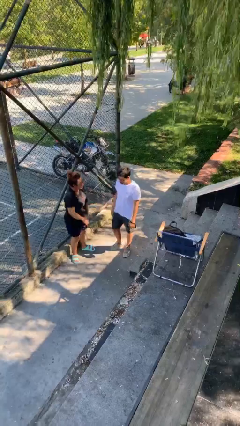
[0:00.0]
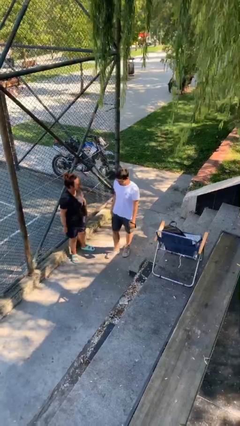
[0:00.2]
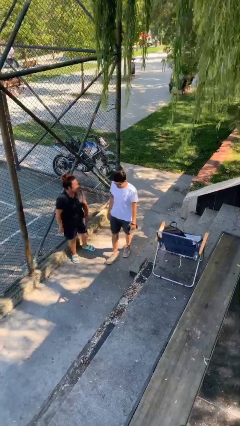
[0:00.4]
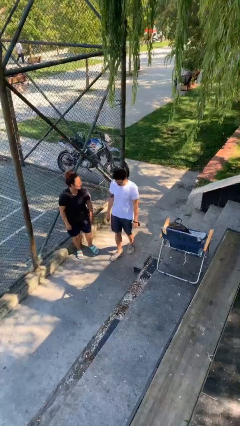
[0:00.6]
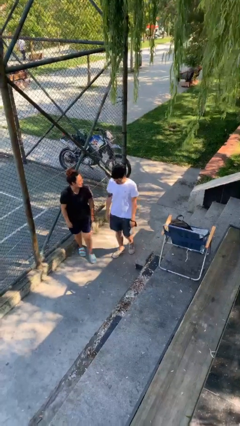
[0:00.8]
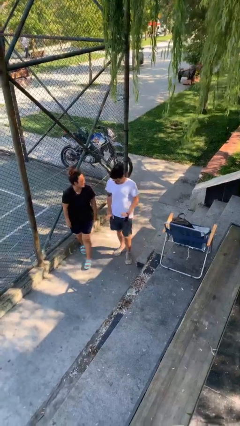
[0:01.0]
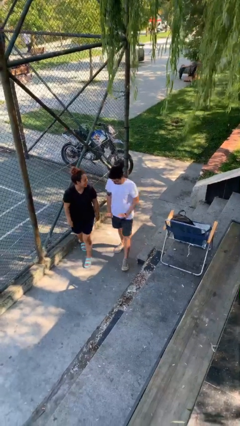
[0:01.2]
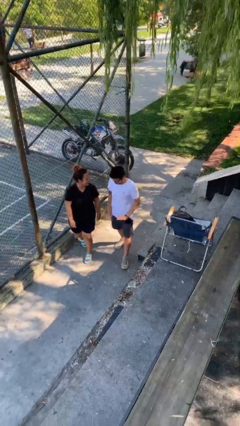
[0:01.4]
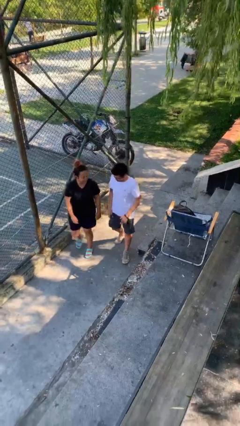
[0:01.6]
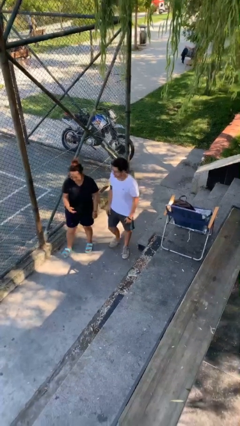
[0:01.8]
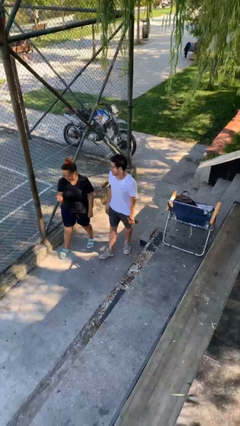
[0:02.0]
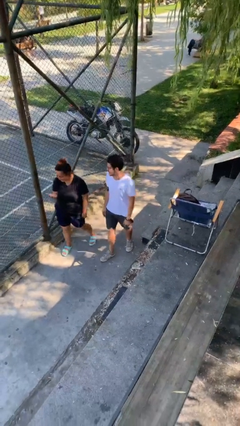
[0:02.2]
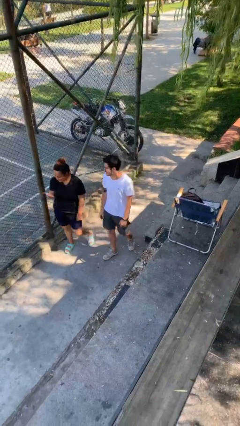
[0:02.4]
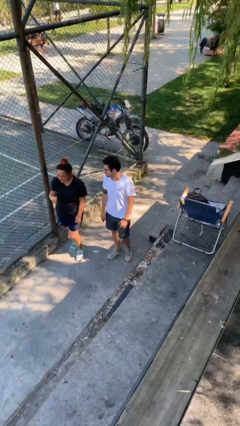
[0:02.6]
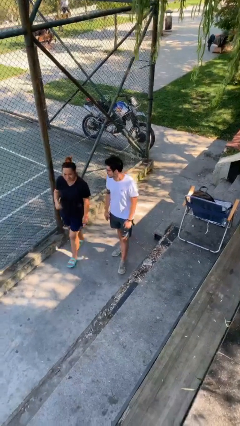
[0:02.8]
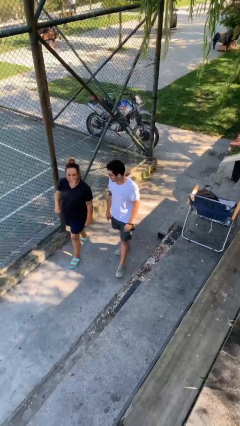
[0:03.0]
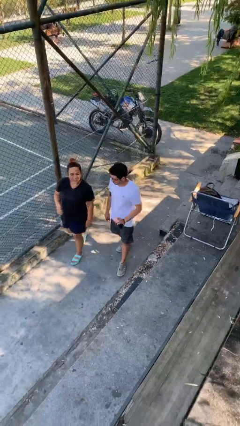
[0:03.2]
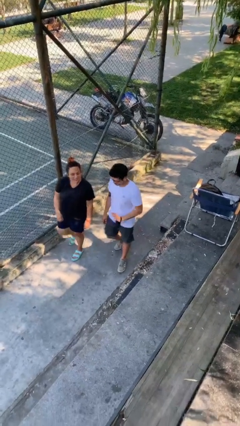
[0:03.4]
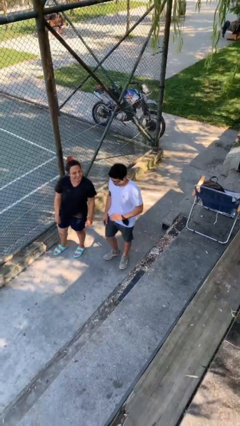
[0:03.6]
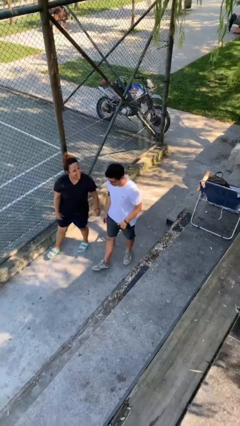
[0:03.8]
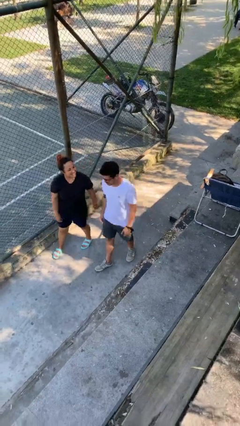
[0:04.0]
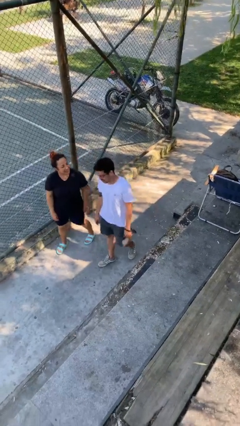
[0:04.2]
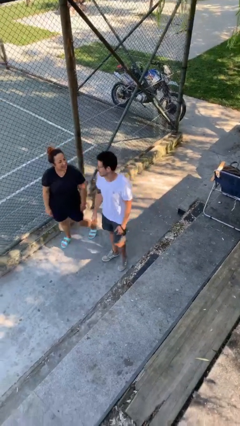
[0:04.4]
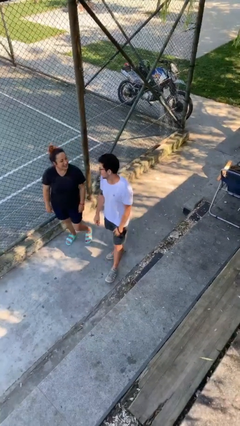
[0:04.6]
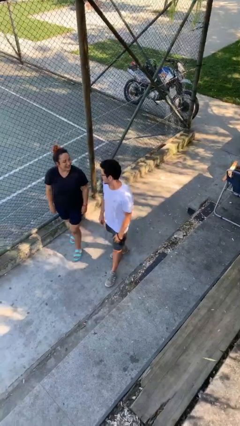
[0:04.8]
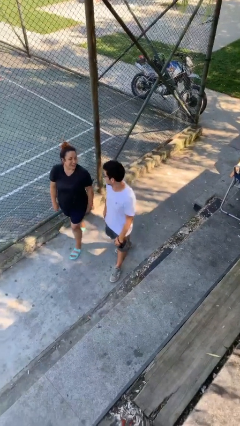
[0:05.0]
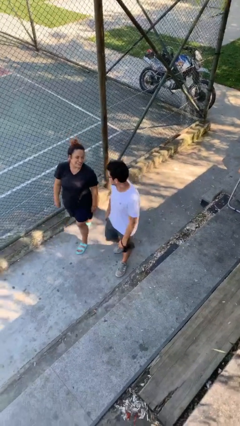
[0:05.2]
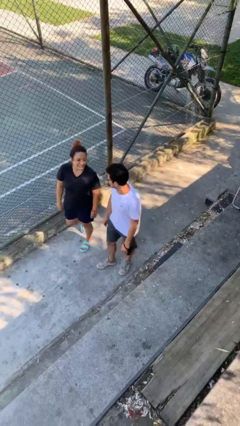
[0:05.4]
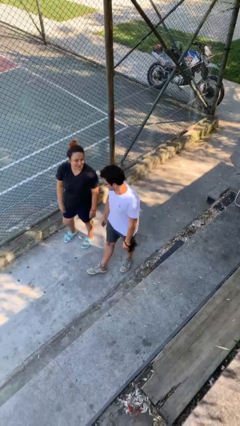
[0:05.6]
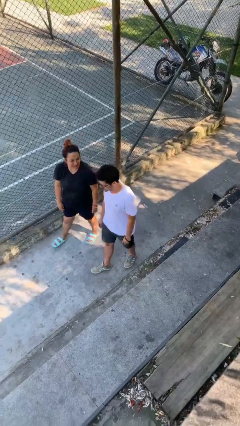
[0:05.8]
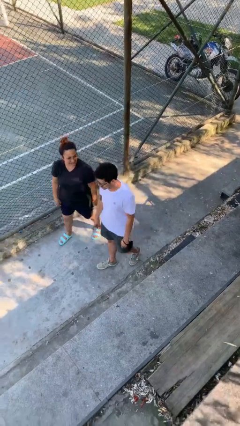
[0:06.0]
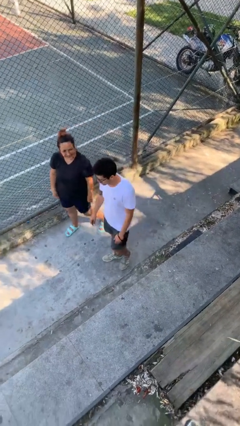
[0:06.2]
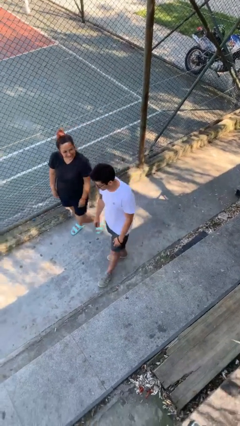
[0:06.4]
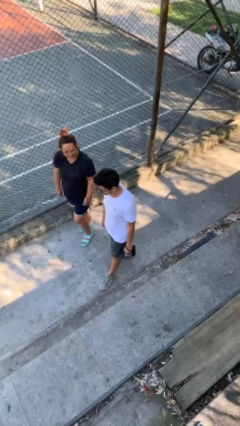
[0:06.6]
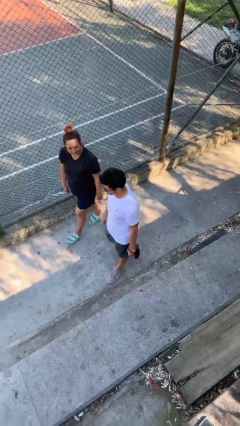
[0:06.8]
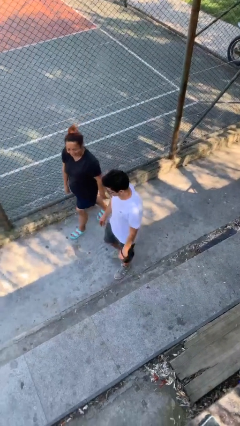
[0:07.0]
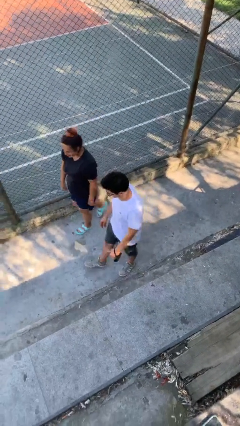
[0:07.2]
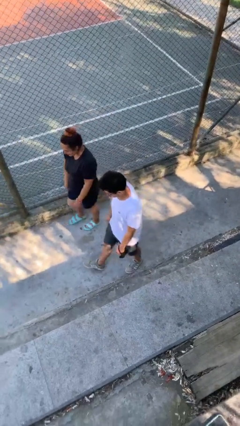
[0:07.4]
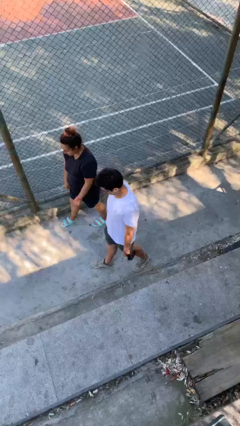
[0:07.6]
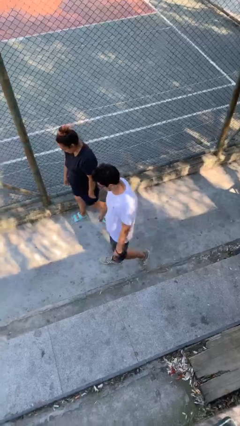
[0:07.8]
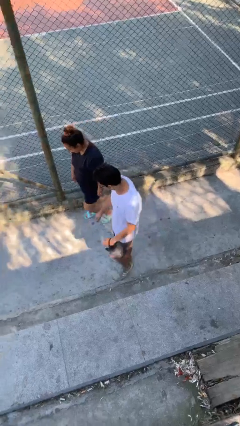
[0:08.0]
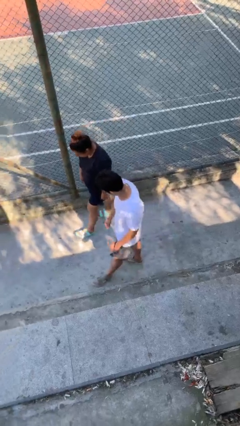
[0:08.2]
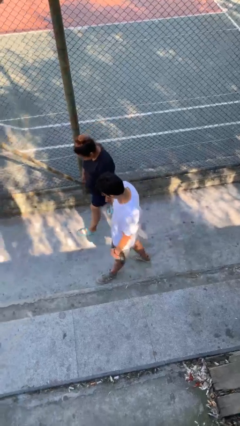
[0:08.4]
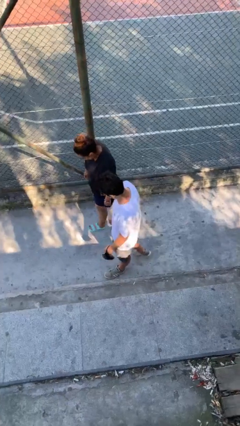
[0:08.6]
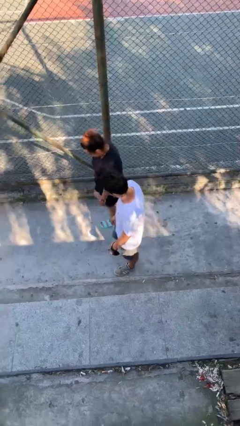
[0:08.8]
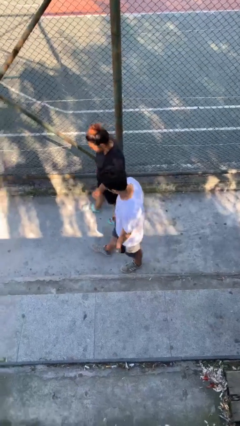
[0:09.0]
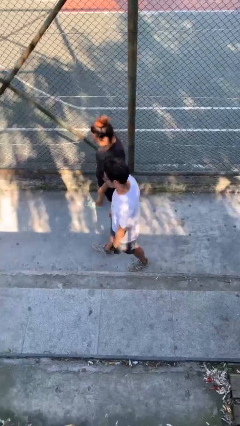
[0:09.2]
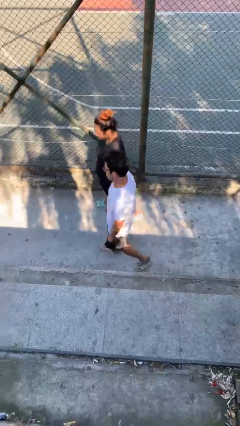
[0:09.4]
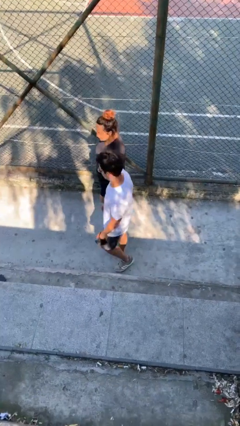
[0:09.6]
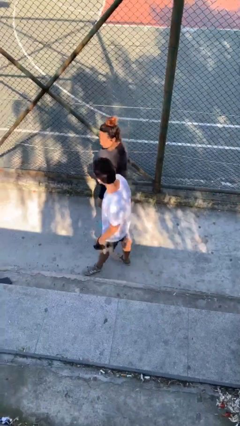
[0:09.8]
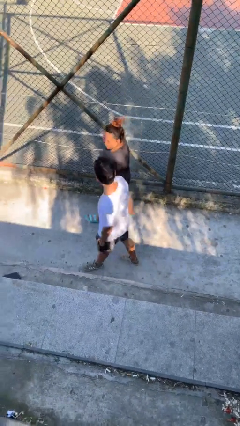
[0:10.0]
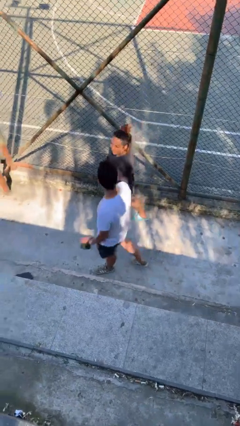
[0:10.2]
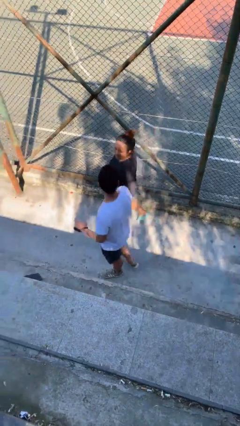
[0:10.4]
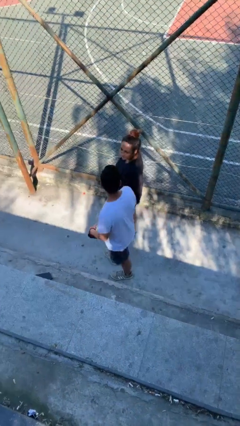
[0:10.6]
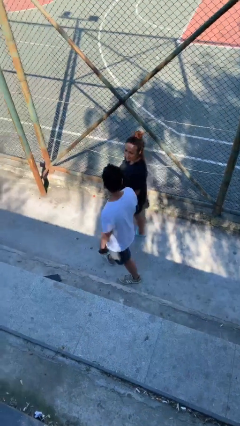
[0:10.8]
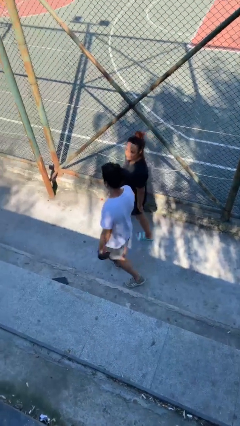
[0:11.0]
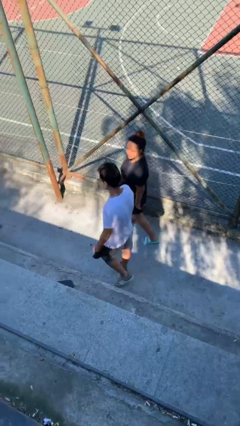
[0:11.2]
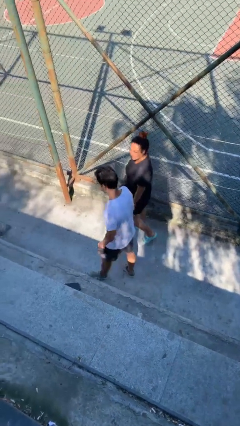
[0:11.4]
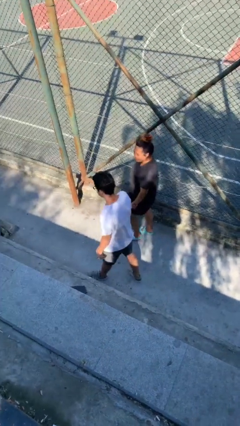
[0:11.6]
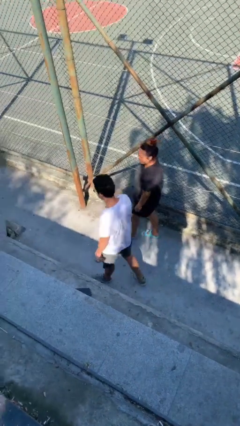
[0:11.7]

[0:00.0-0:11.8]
person talks to person

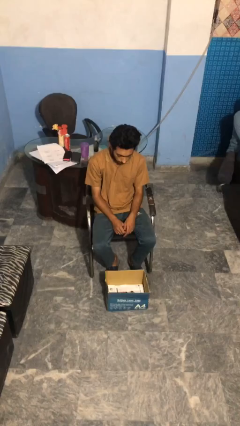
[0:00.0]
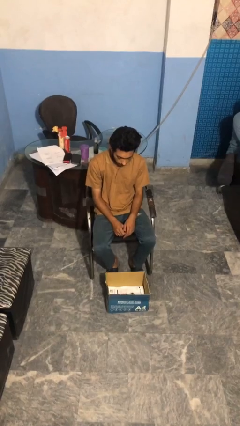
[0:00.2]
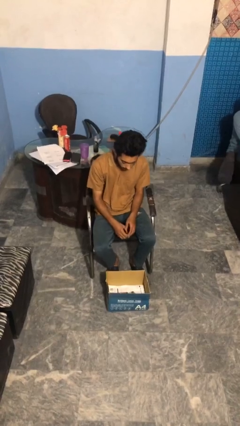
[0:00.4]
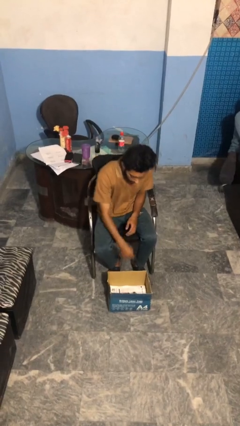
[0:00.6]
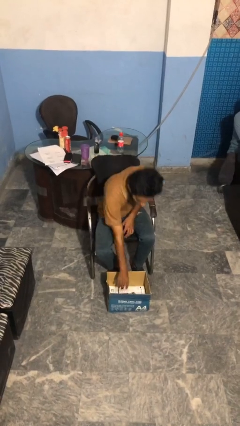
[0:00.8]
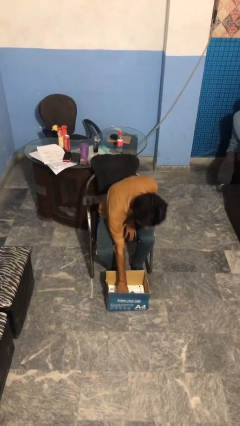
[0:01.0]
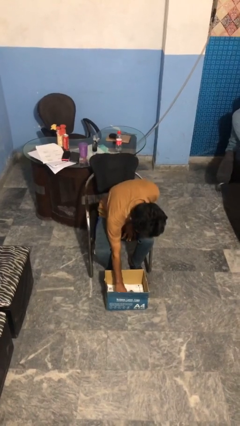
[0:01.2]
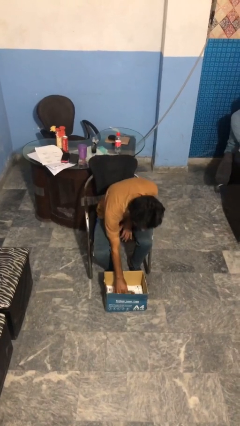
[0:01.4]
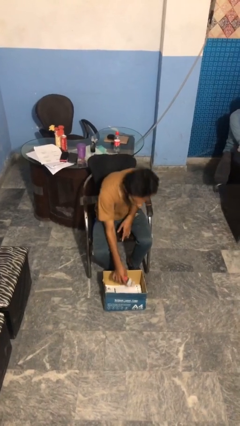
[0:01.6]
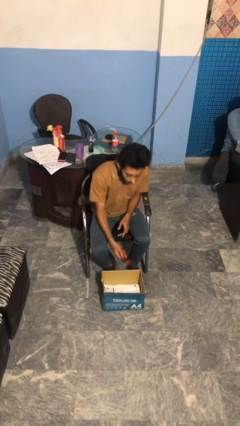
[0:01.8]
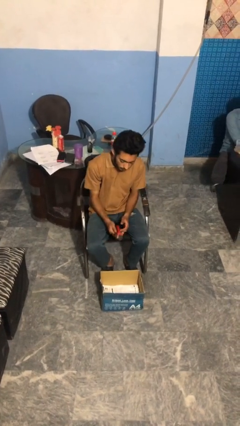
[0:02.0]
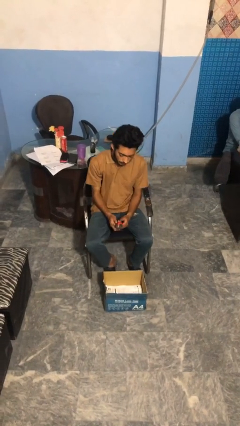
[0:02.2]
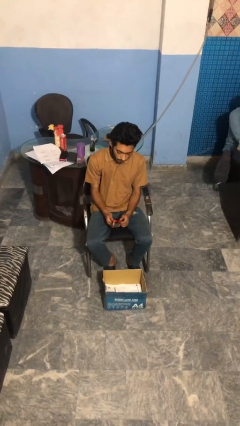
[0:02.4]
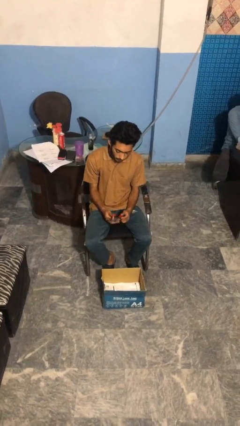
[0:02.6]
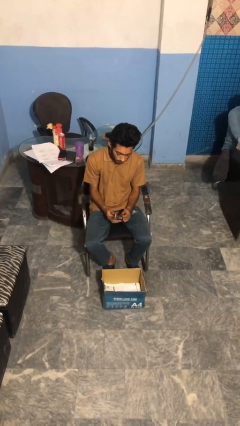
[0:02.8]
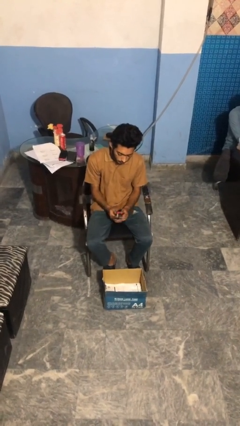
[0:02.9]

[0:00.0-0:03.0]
person takes object from box

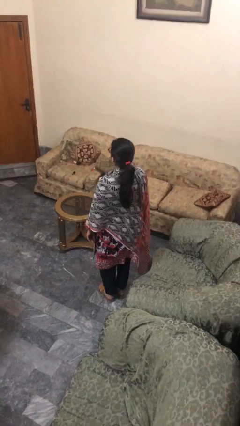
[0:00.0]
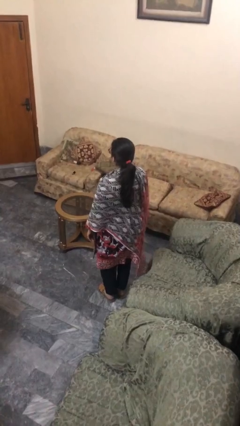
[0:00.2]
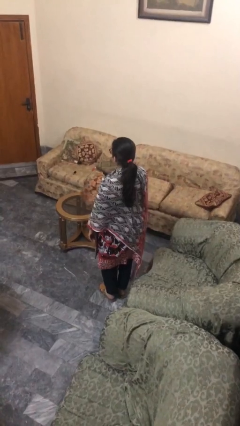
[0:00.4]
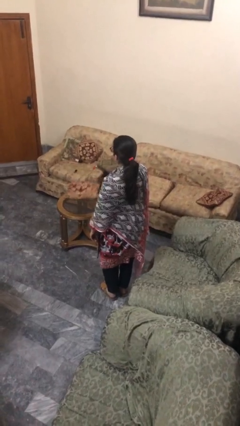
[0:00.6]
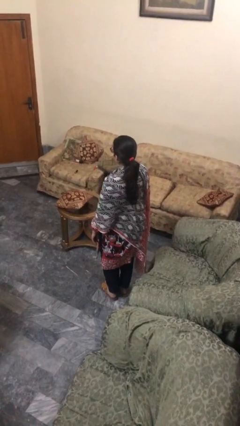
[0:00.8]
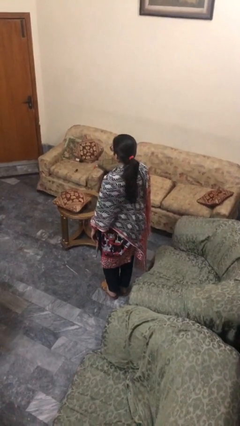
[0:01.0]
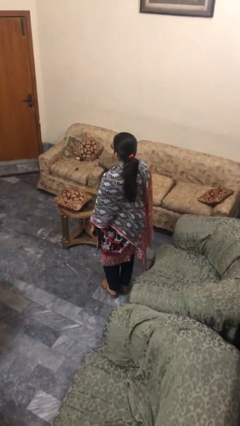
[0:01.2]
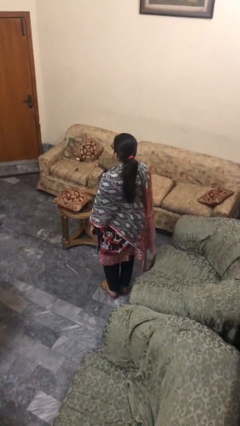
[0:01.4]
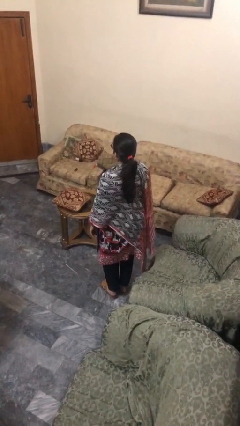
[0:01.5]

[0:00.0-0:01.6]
person throws object on table

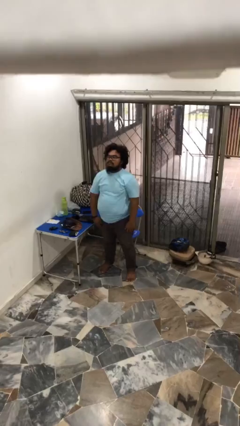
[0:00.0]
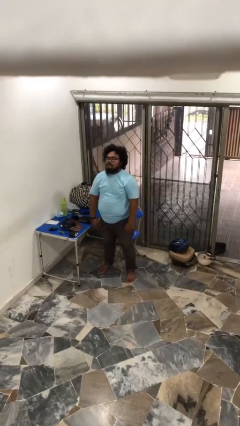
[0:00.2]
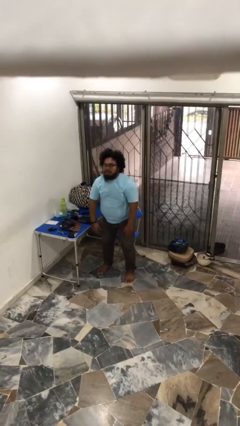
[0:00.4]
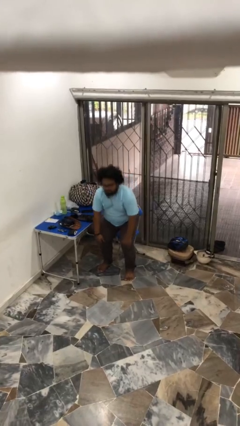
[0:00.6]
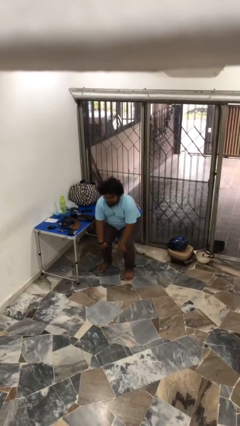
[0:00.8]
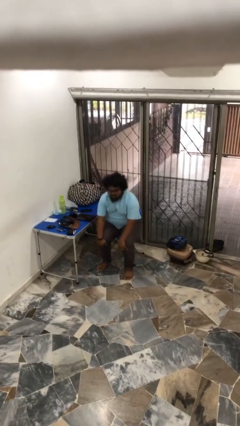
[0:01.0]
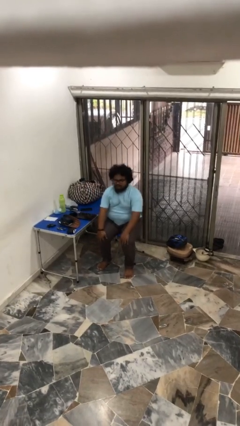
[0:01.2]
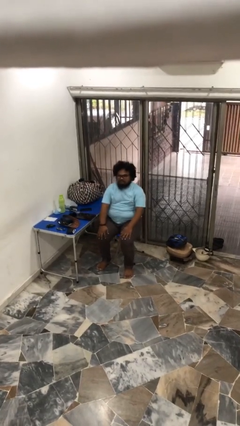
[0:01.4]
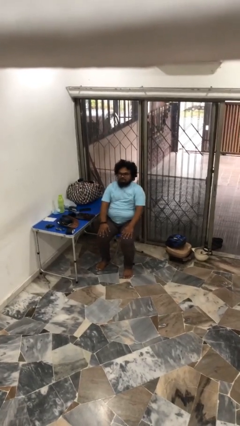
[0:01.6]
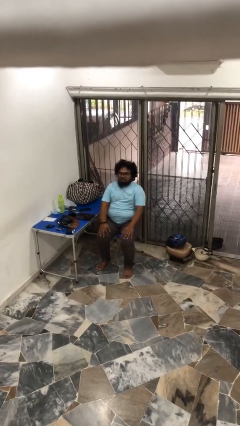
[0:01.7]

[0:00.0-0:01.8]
person sits down
